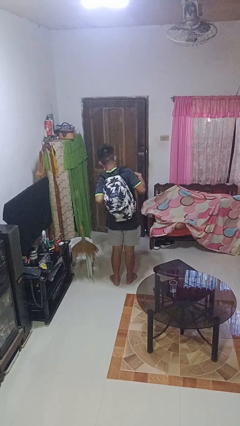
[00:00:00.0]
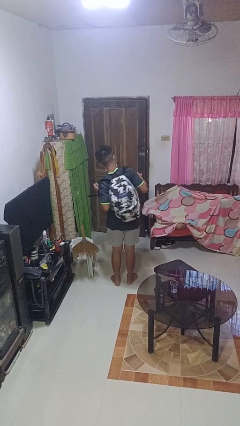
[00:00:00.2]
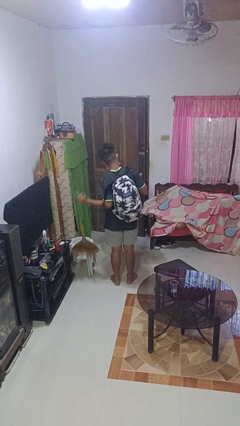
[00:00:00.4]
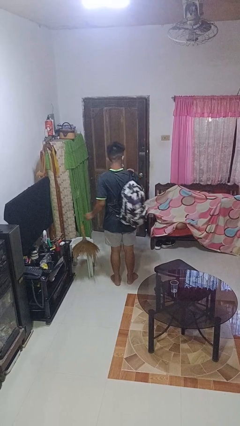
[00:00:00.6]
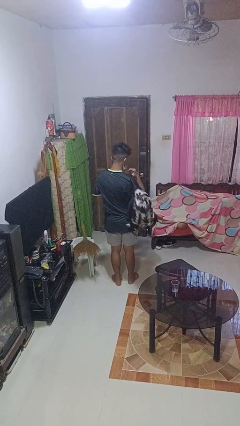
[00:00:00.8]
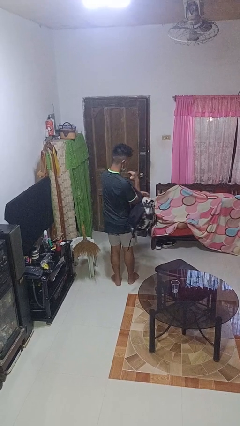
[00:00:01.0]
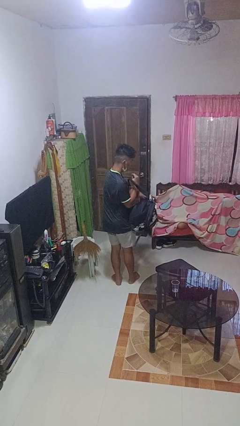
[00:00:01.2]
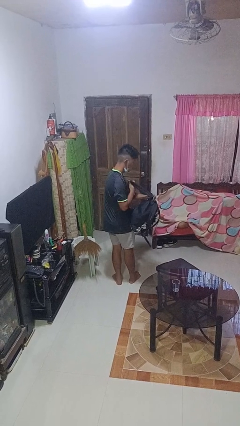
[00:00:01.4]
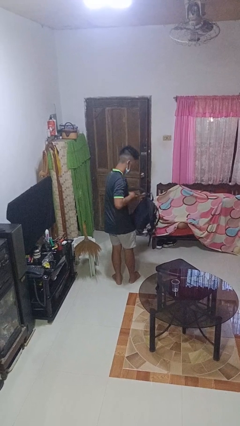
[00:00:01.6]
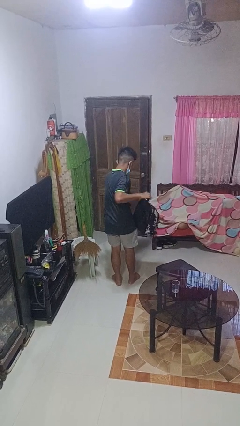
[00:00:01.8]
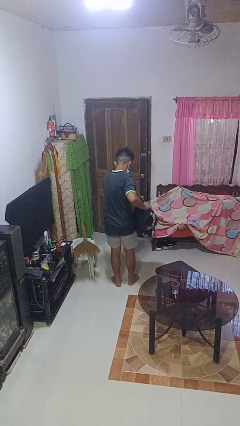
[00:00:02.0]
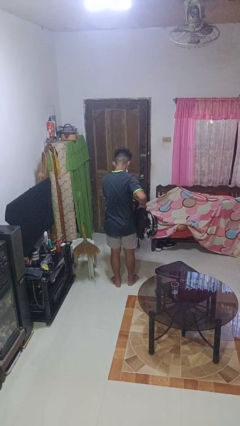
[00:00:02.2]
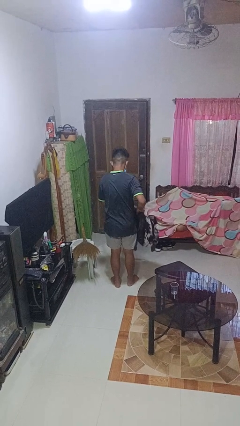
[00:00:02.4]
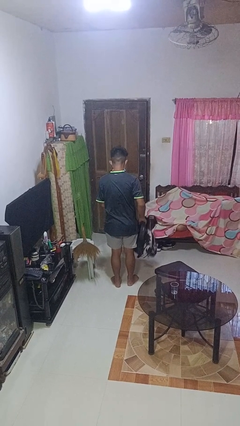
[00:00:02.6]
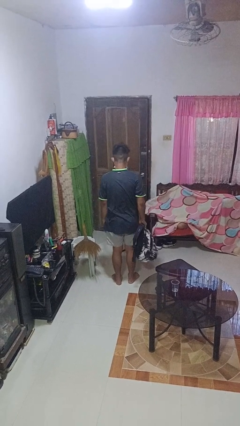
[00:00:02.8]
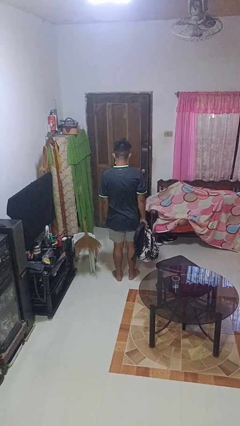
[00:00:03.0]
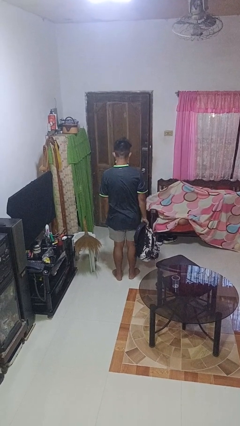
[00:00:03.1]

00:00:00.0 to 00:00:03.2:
person takes off backpack

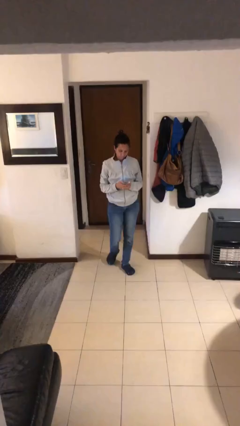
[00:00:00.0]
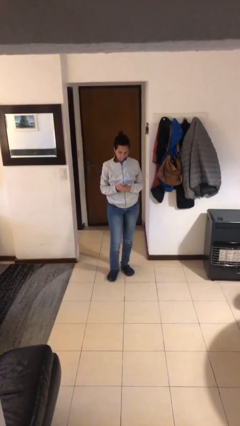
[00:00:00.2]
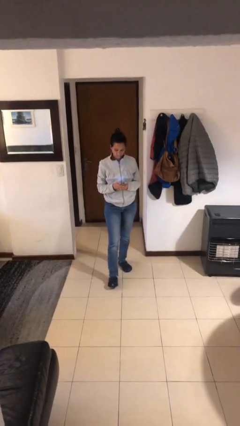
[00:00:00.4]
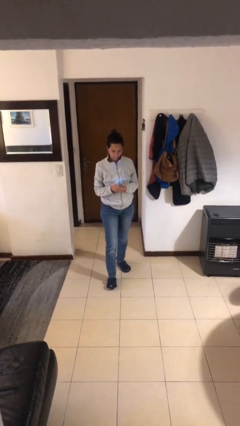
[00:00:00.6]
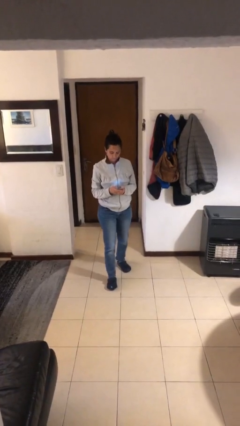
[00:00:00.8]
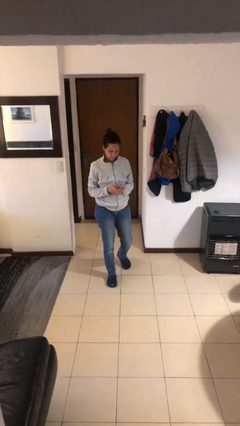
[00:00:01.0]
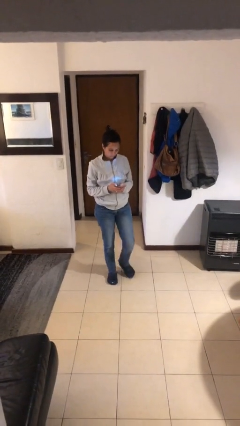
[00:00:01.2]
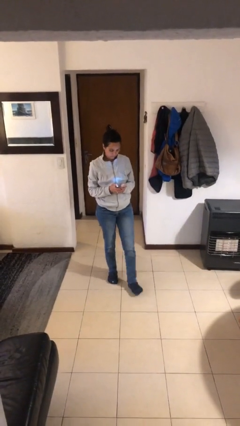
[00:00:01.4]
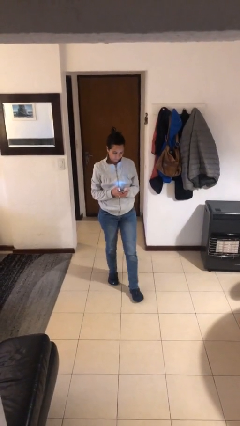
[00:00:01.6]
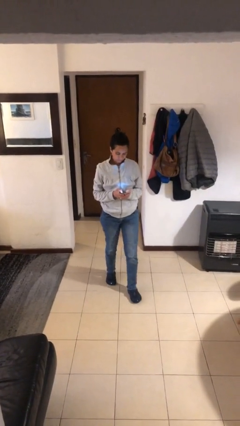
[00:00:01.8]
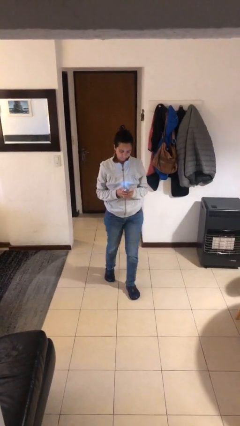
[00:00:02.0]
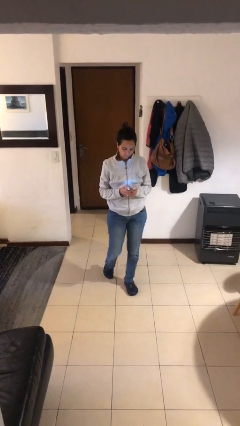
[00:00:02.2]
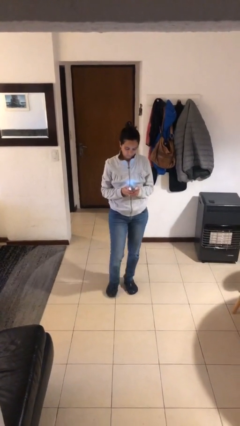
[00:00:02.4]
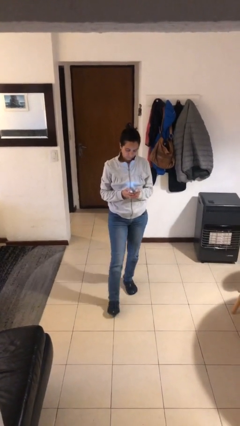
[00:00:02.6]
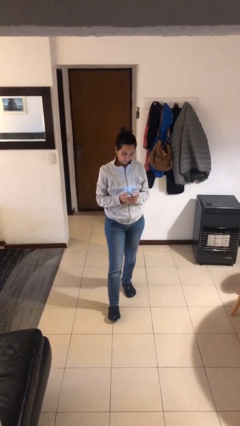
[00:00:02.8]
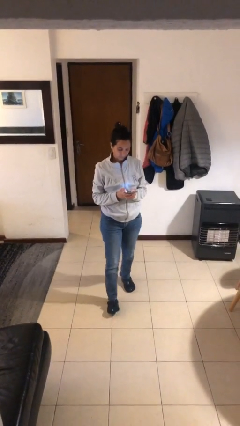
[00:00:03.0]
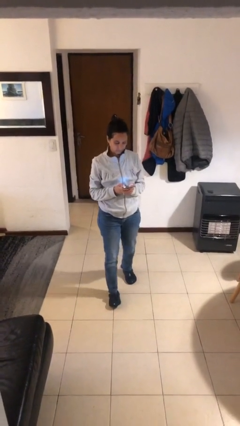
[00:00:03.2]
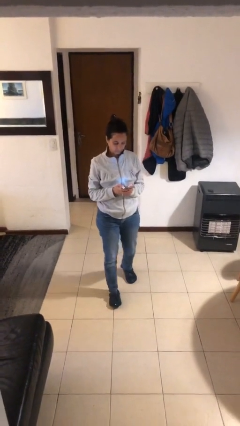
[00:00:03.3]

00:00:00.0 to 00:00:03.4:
person texts on phone

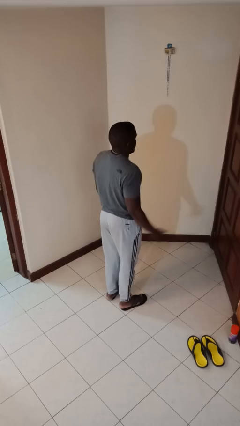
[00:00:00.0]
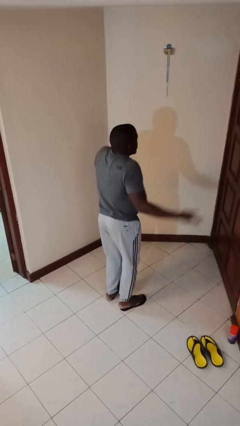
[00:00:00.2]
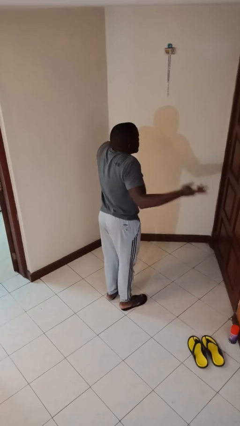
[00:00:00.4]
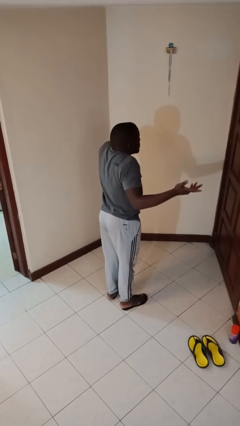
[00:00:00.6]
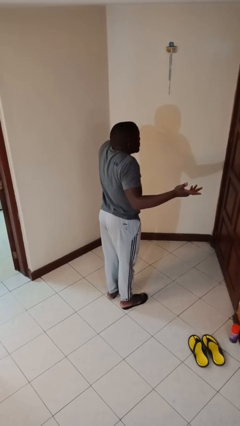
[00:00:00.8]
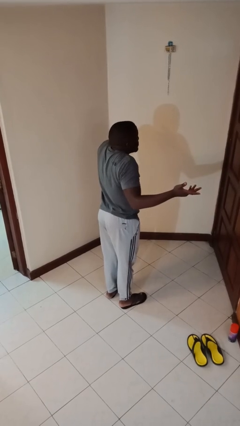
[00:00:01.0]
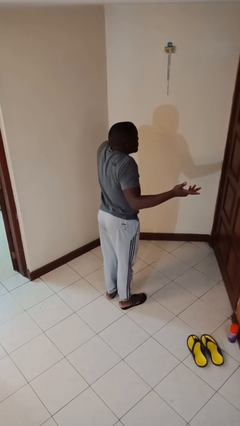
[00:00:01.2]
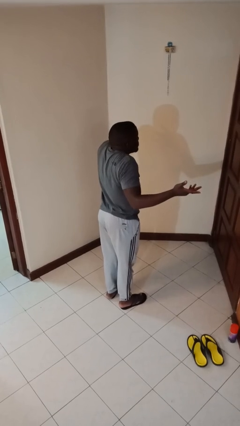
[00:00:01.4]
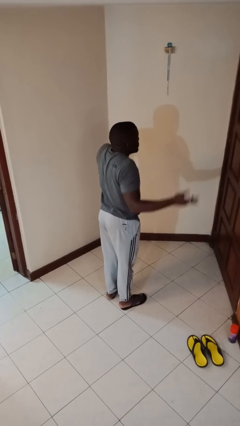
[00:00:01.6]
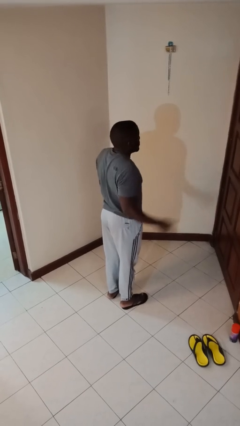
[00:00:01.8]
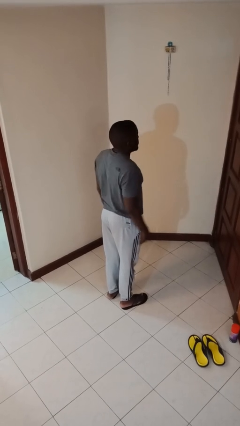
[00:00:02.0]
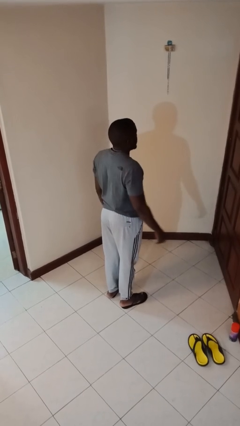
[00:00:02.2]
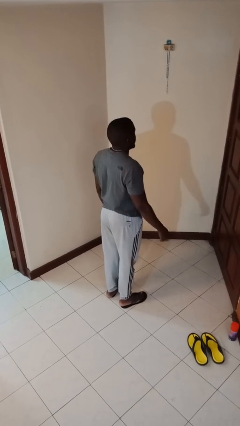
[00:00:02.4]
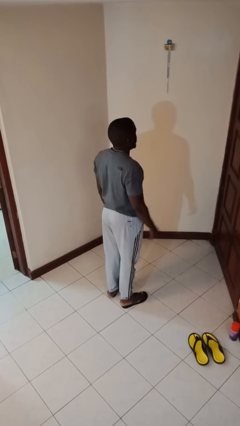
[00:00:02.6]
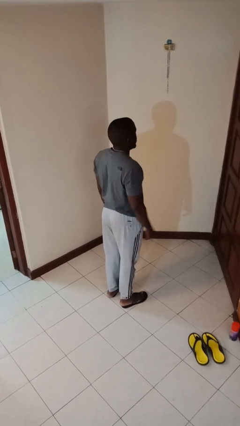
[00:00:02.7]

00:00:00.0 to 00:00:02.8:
person shrugs

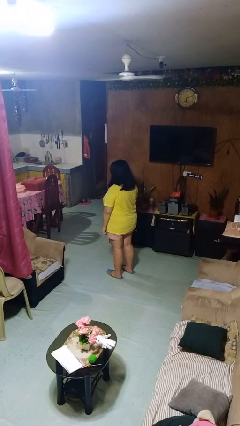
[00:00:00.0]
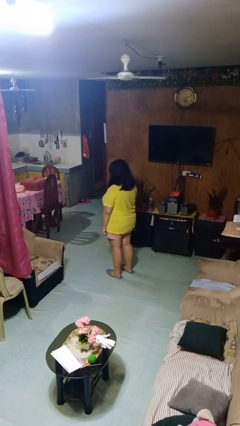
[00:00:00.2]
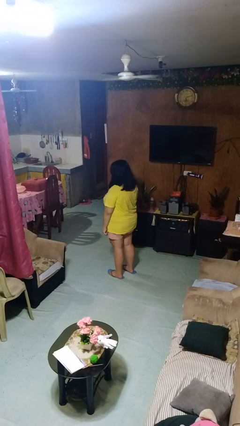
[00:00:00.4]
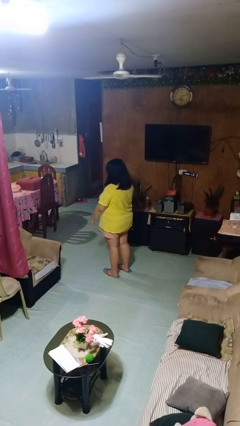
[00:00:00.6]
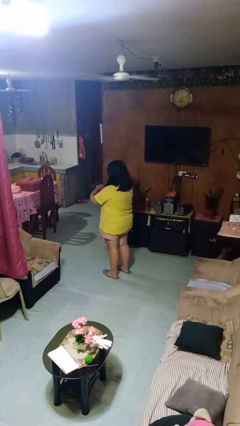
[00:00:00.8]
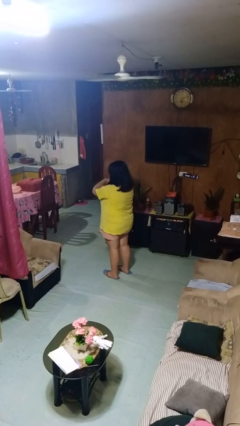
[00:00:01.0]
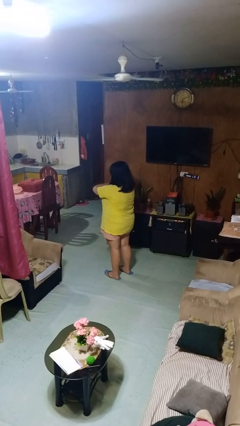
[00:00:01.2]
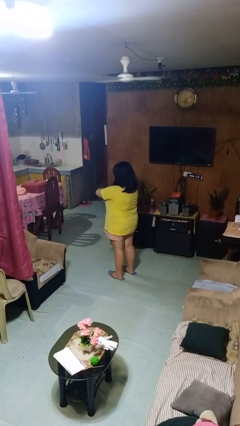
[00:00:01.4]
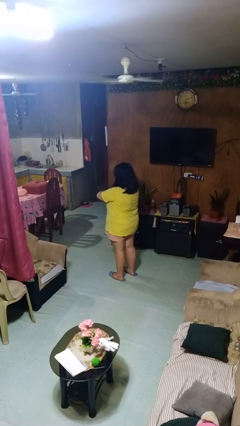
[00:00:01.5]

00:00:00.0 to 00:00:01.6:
person crosses arms

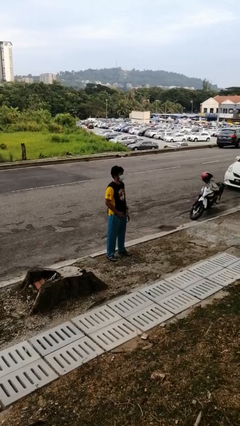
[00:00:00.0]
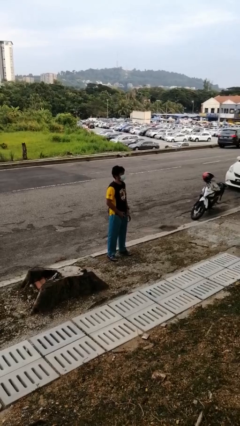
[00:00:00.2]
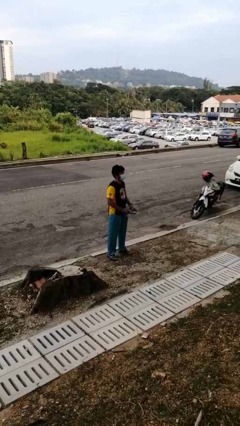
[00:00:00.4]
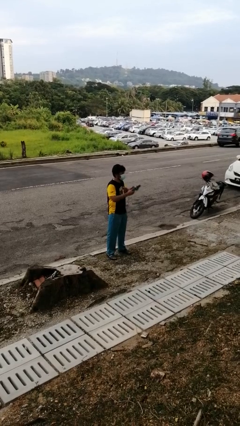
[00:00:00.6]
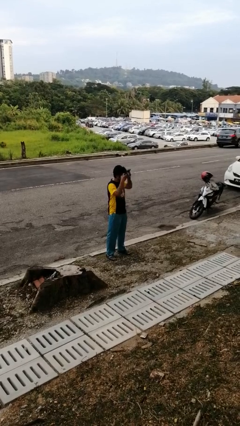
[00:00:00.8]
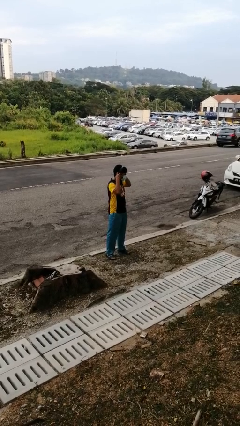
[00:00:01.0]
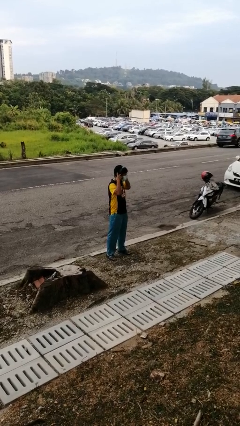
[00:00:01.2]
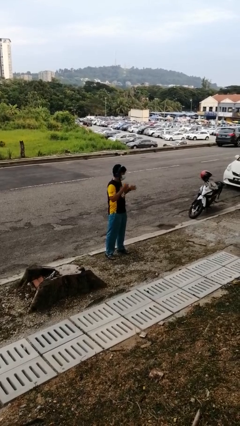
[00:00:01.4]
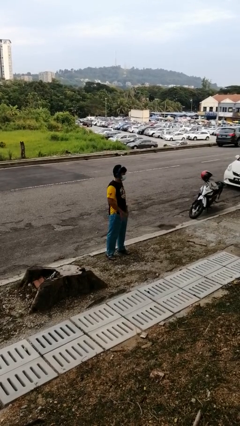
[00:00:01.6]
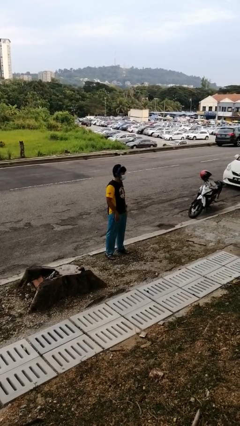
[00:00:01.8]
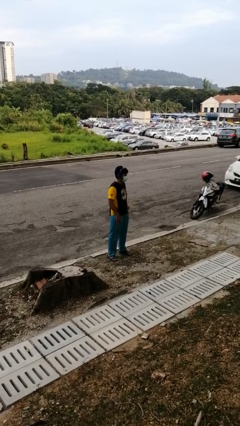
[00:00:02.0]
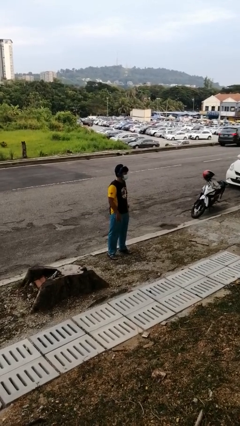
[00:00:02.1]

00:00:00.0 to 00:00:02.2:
person puts on headphones

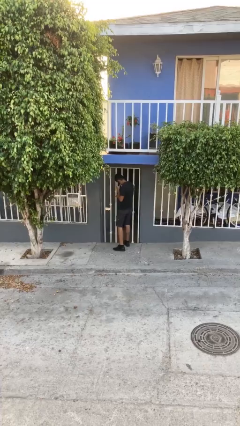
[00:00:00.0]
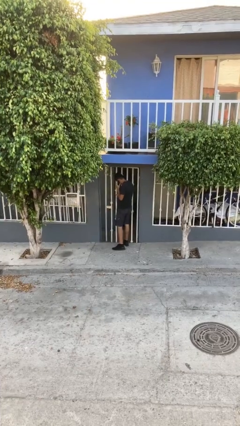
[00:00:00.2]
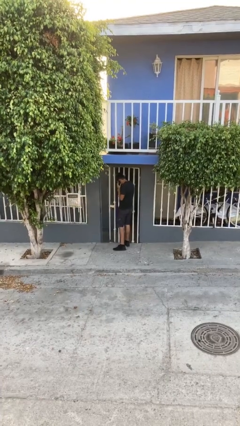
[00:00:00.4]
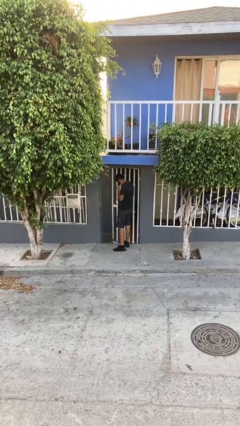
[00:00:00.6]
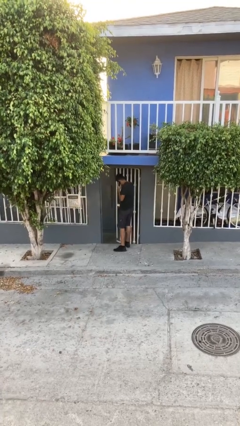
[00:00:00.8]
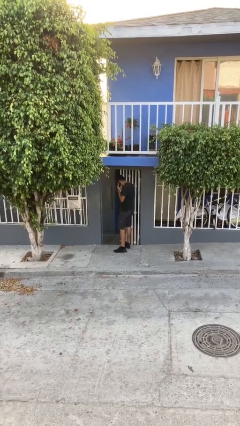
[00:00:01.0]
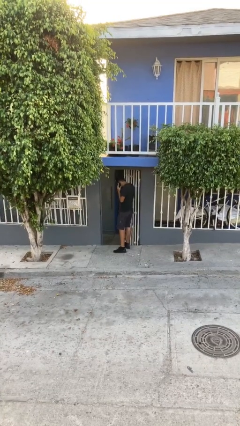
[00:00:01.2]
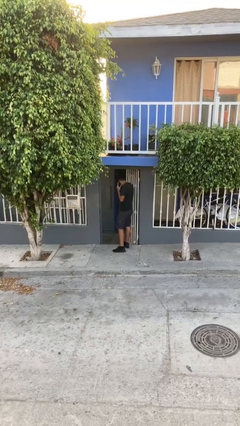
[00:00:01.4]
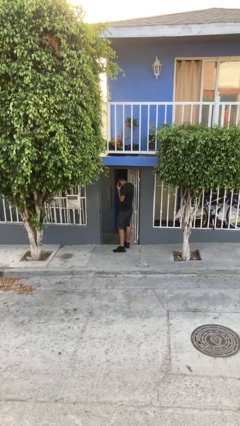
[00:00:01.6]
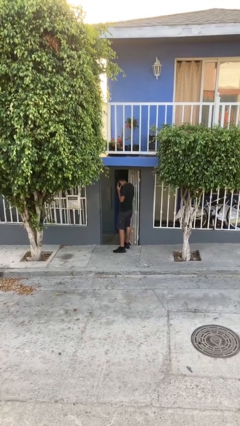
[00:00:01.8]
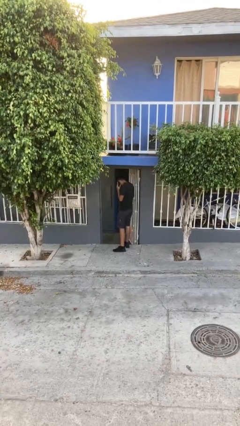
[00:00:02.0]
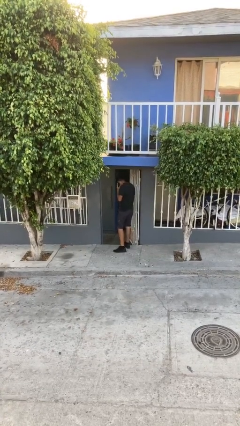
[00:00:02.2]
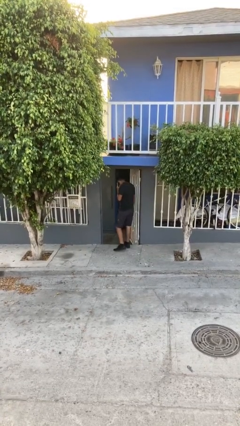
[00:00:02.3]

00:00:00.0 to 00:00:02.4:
person opens facility door

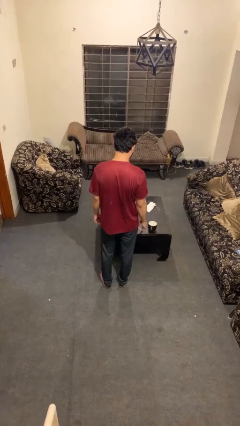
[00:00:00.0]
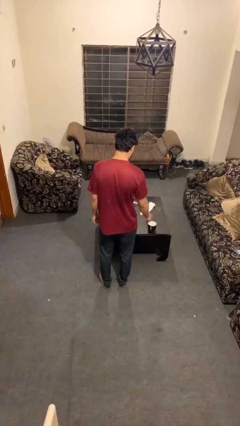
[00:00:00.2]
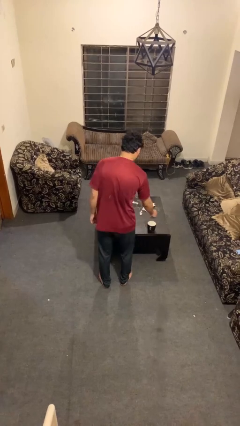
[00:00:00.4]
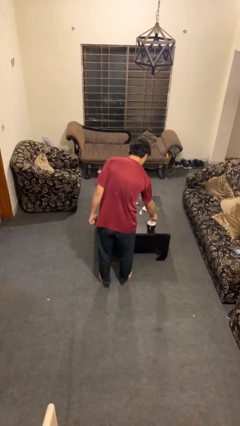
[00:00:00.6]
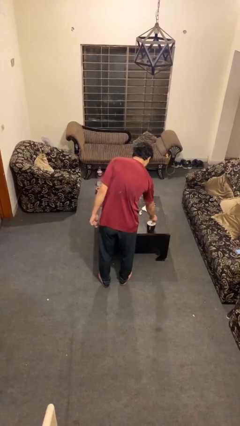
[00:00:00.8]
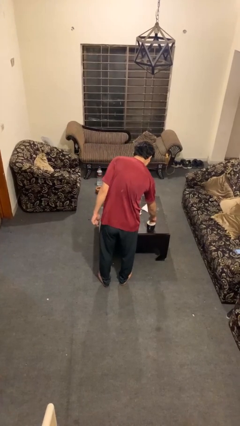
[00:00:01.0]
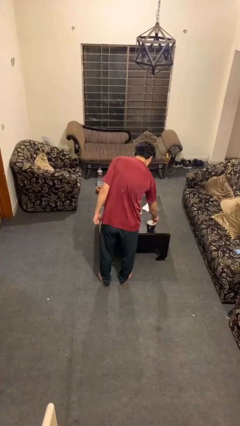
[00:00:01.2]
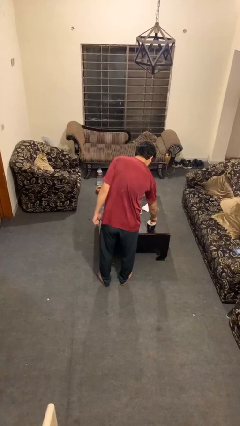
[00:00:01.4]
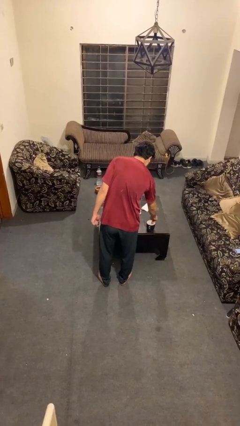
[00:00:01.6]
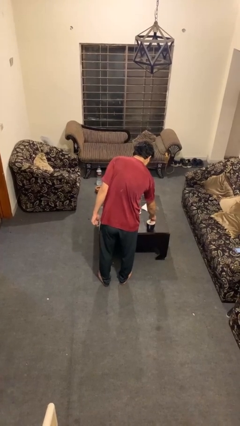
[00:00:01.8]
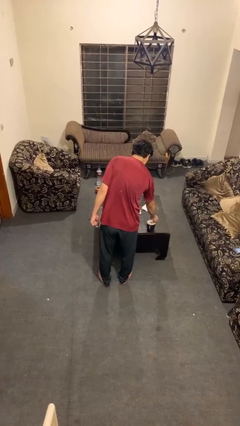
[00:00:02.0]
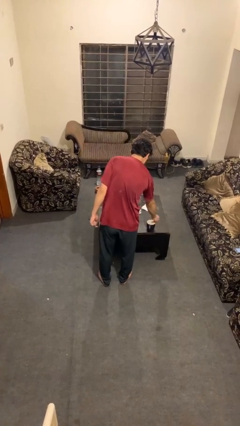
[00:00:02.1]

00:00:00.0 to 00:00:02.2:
person stirs mug
